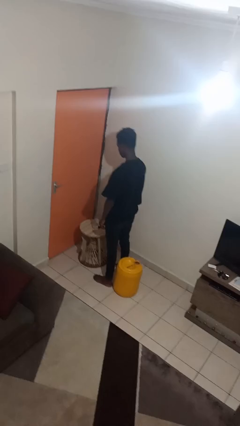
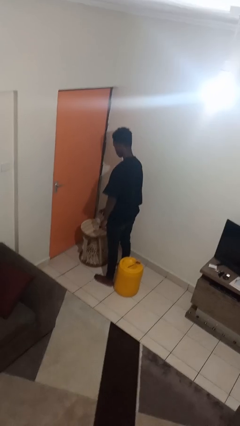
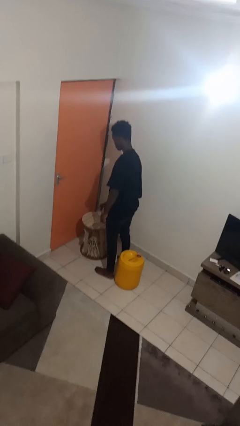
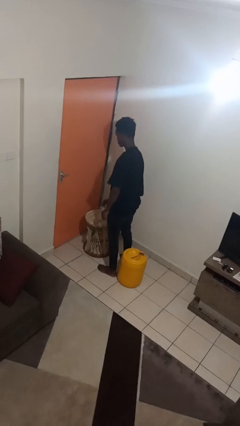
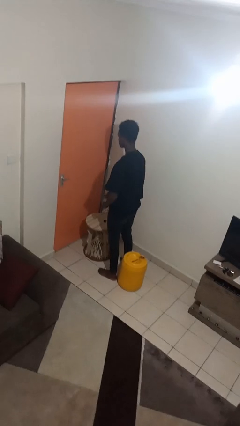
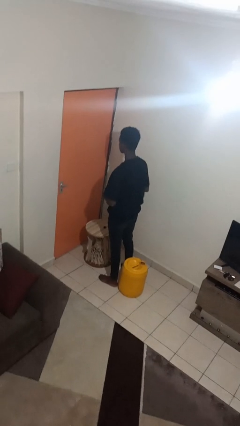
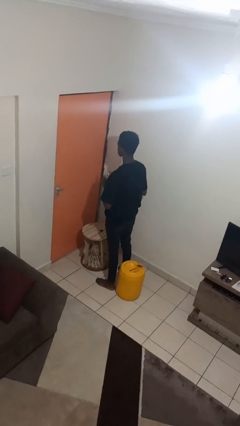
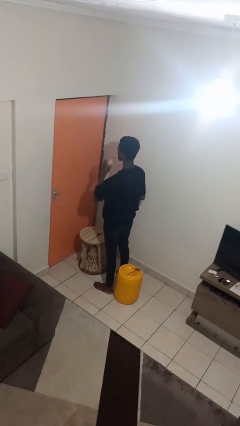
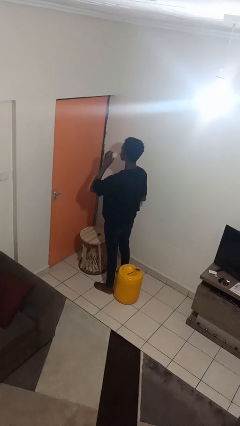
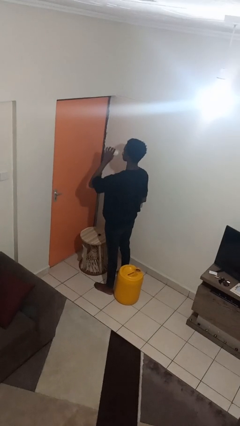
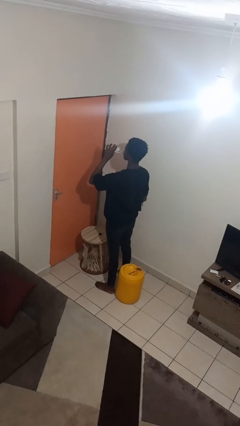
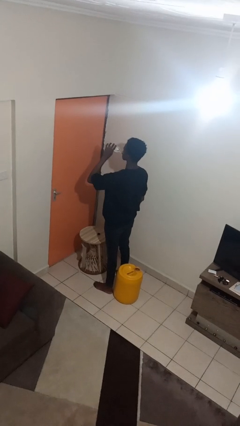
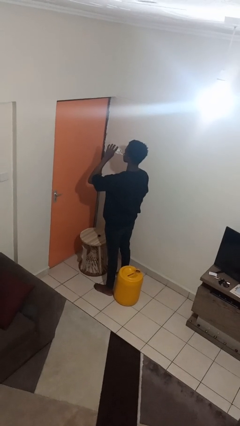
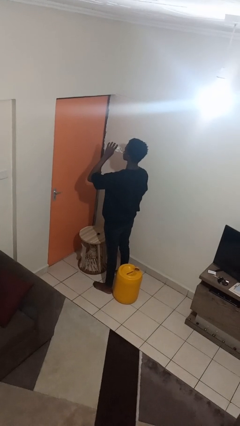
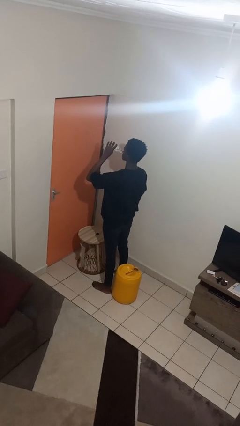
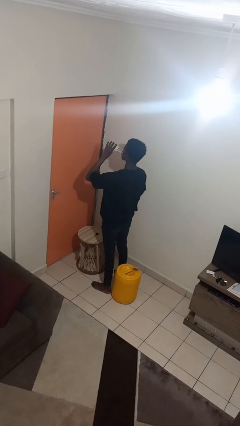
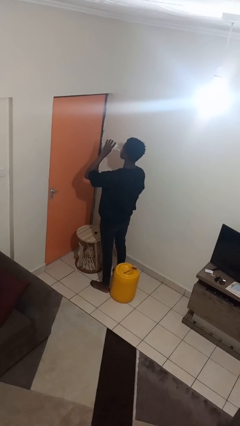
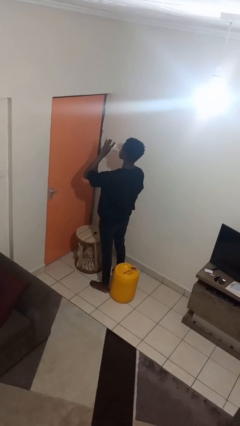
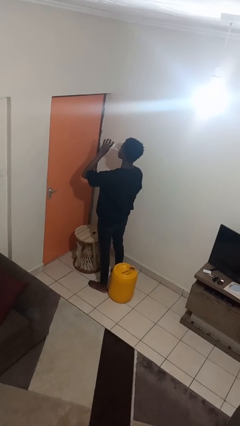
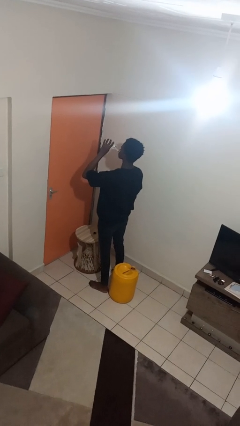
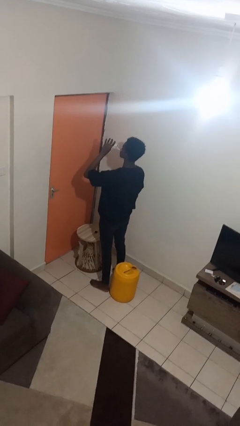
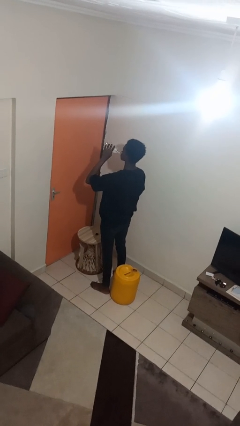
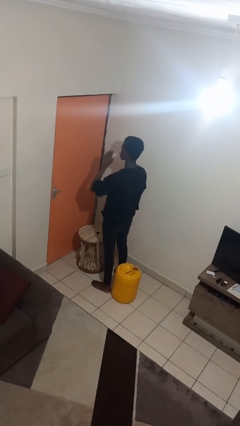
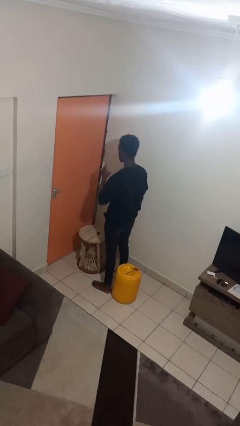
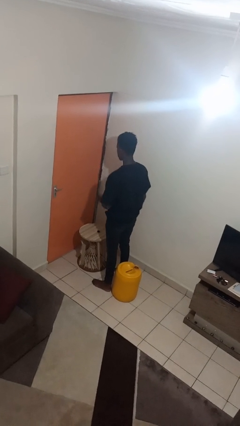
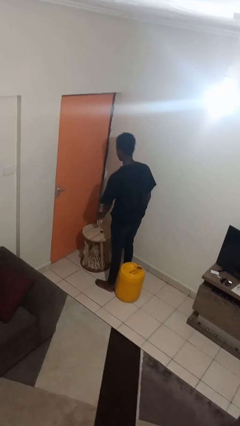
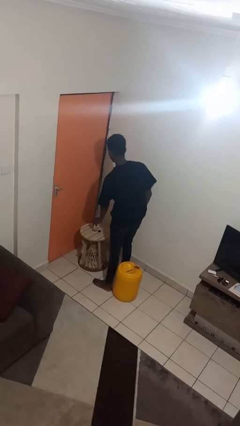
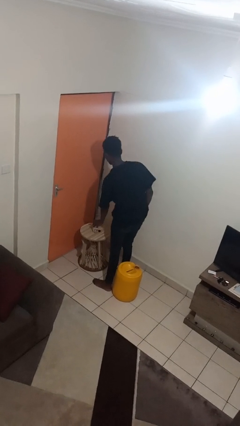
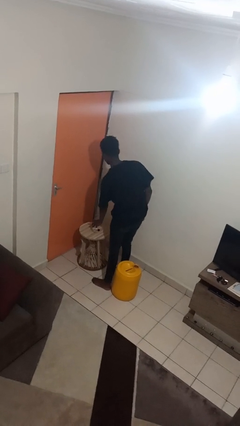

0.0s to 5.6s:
person drinks from bottle

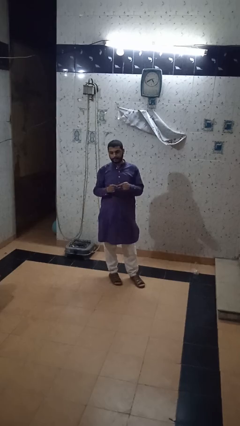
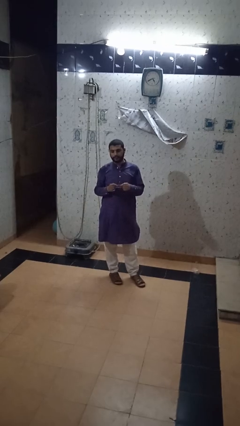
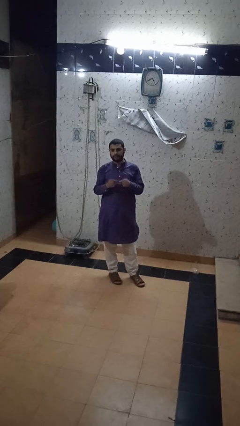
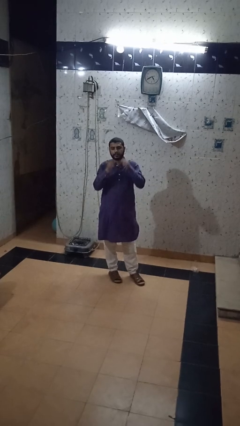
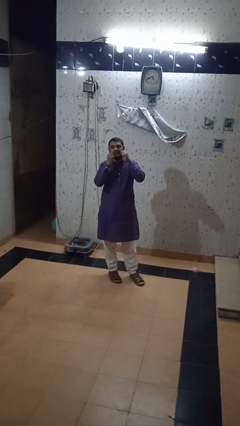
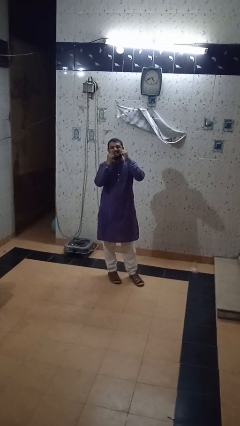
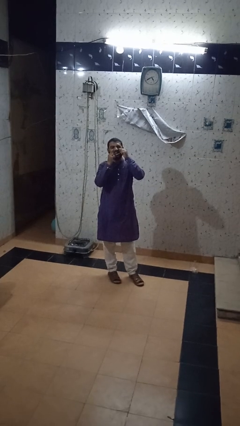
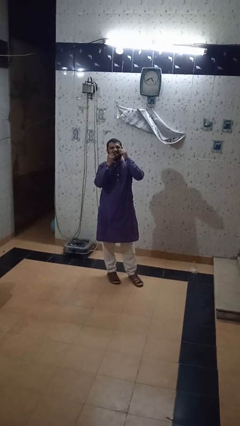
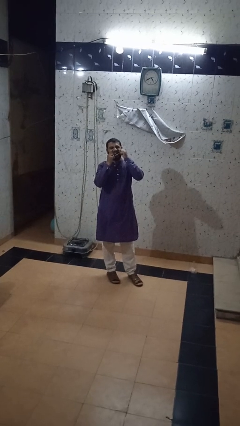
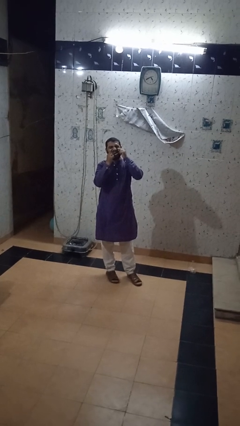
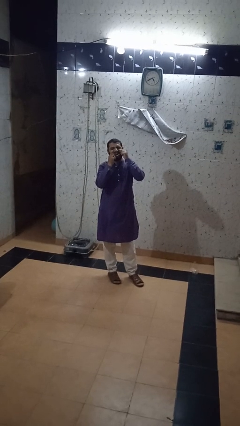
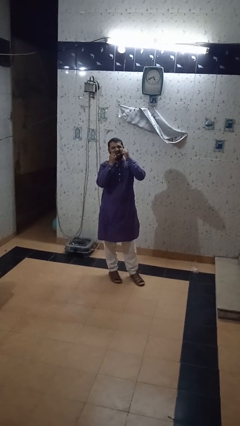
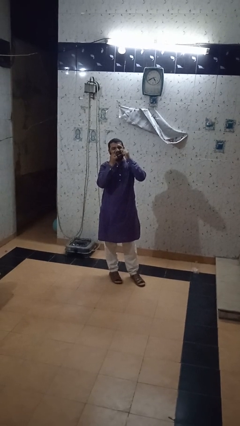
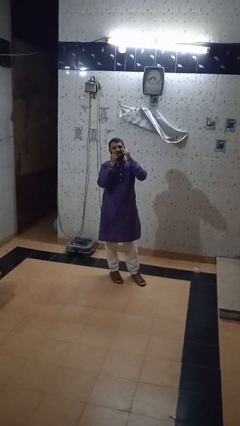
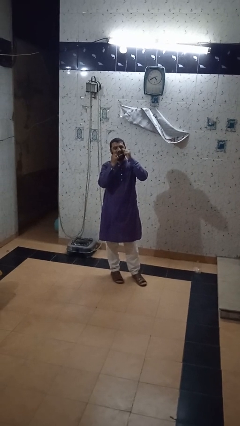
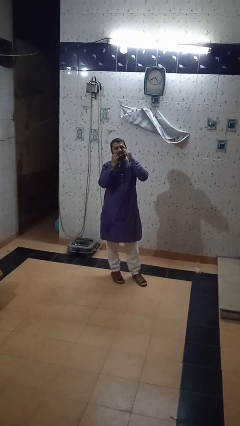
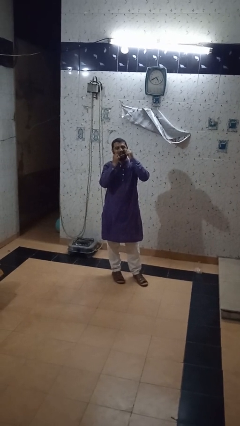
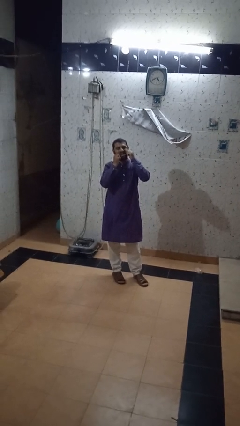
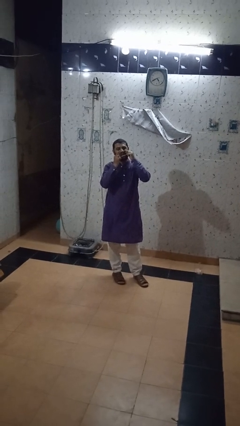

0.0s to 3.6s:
person flosses

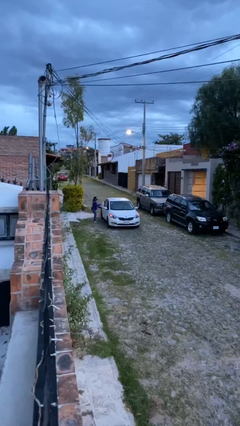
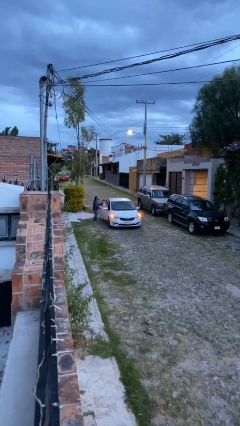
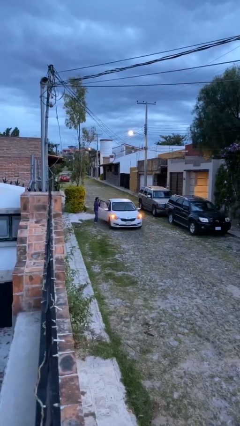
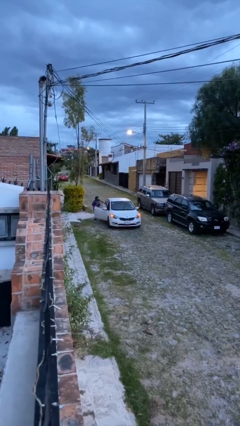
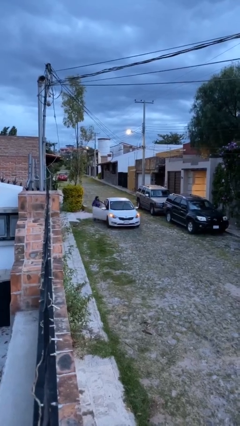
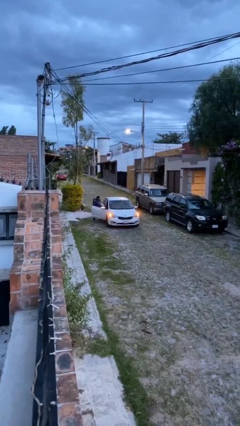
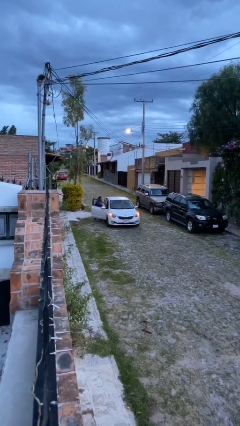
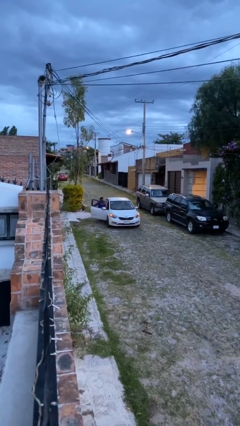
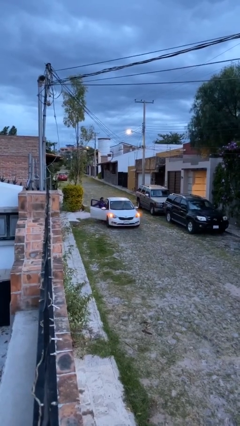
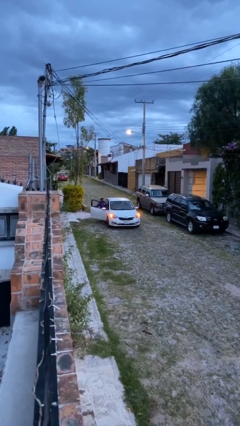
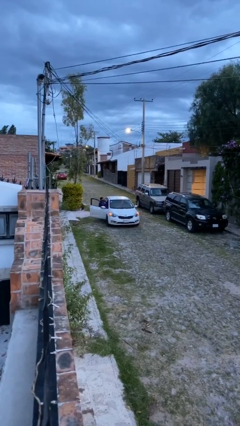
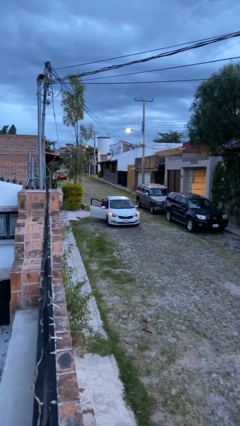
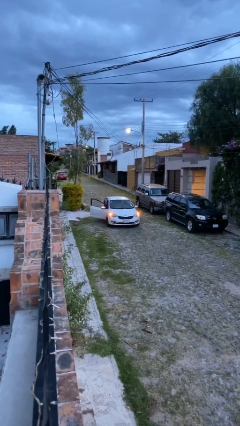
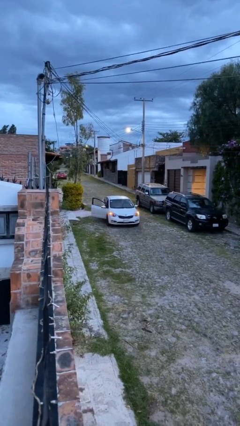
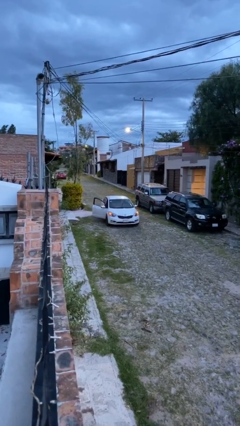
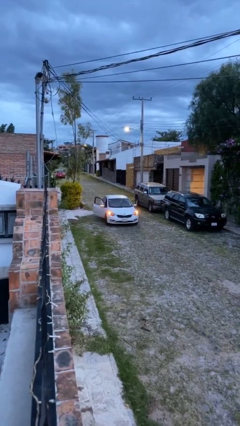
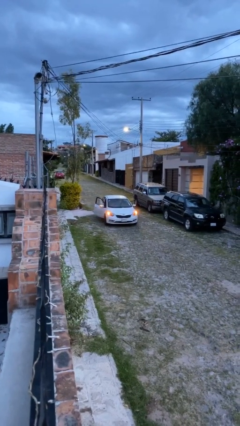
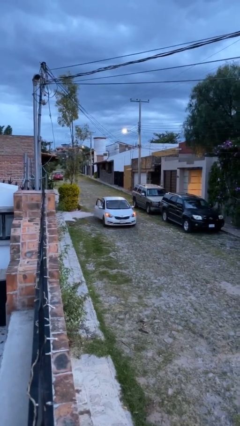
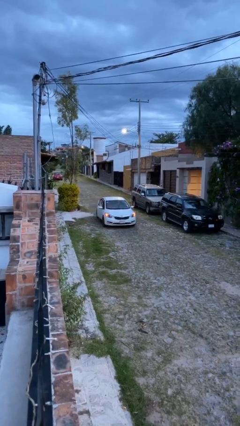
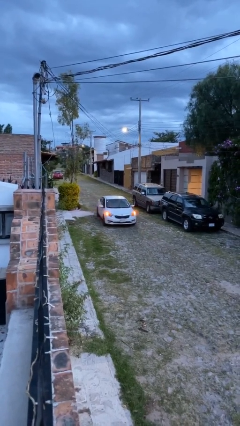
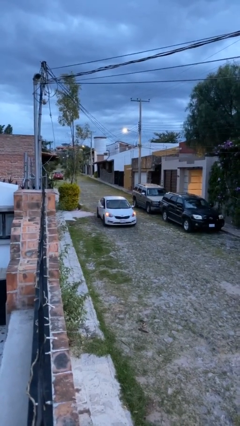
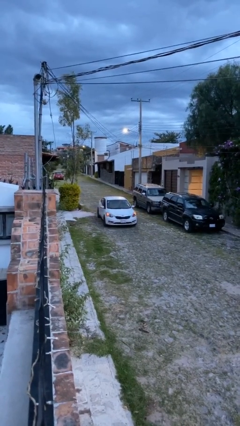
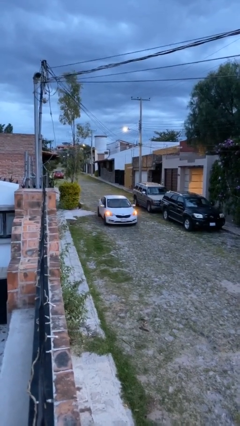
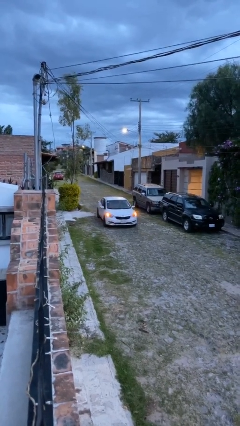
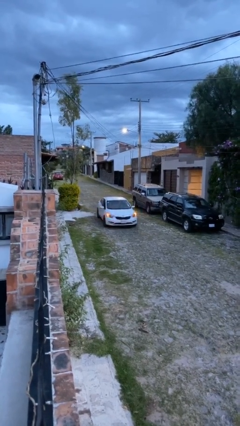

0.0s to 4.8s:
car picks up person

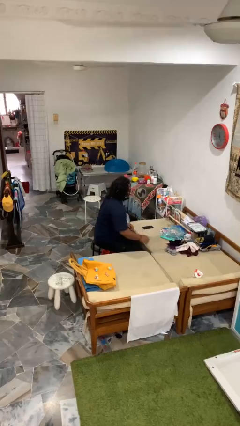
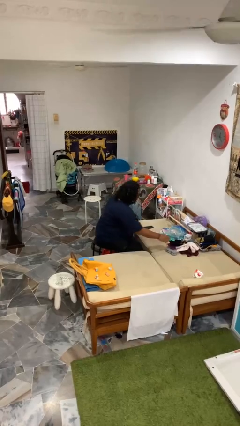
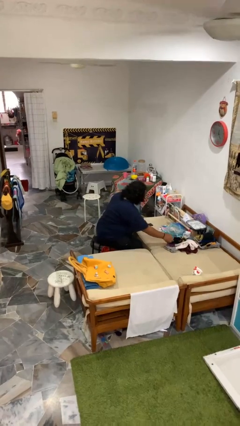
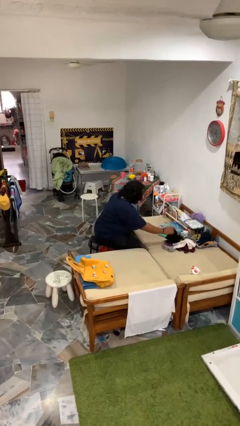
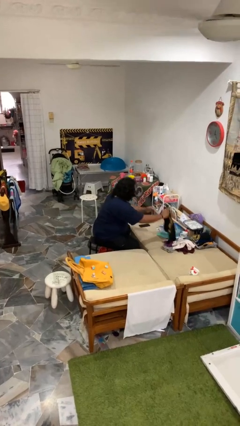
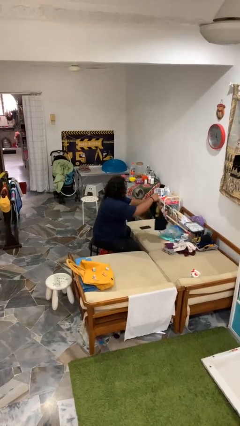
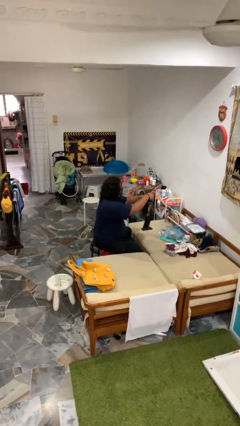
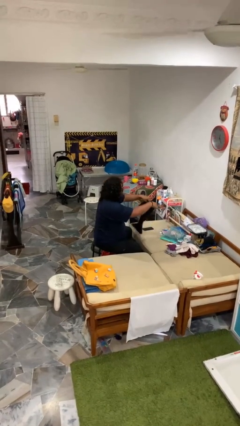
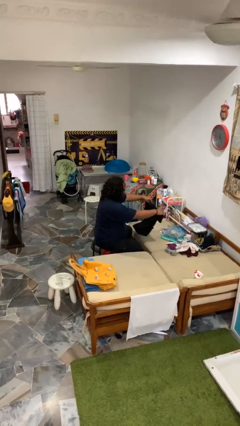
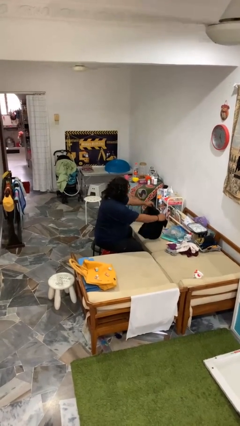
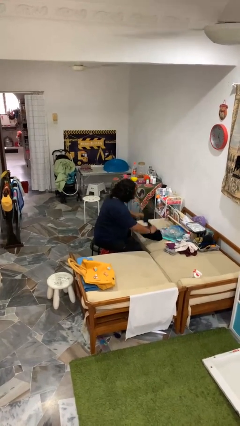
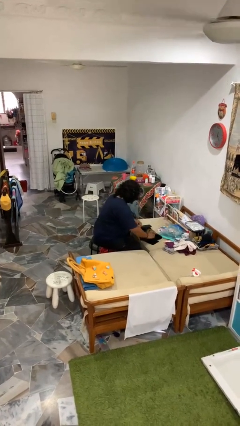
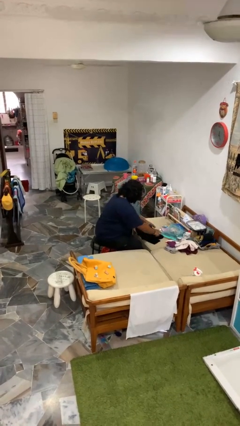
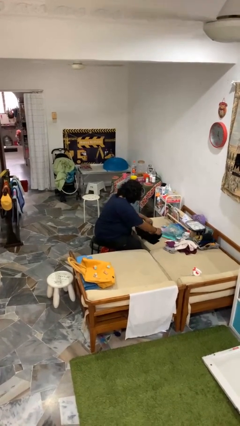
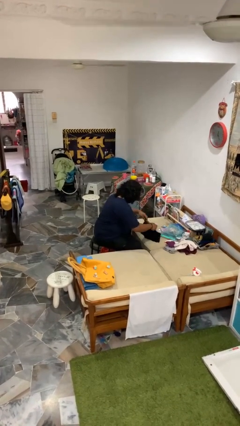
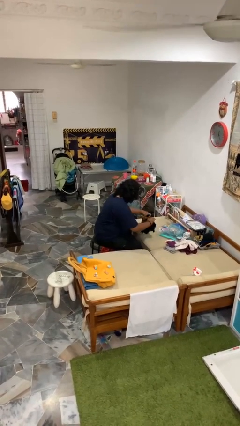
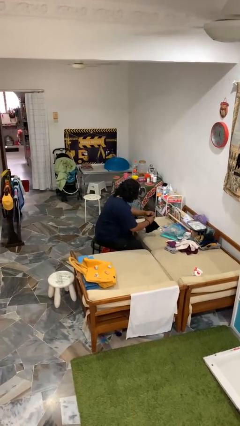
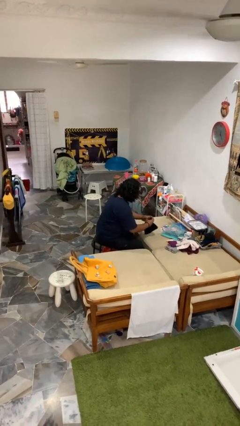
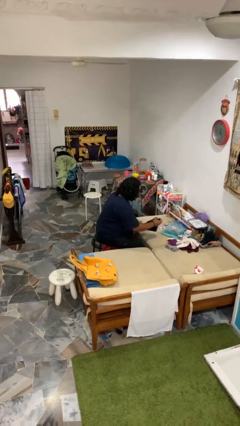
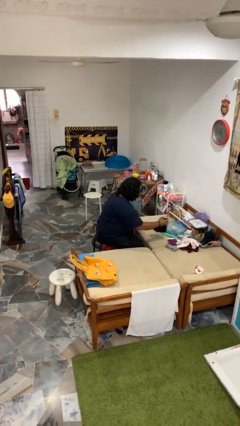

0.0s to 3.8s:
person folds shirt
